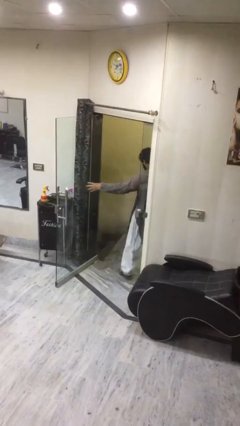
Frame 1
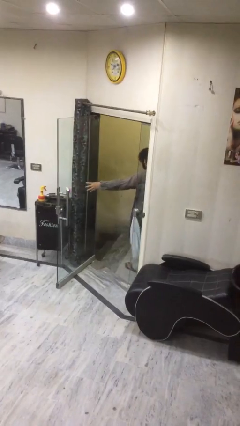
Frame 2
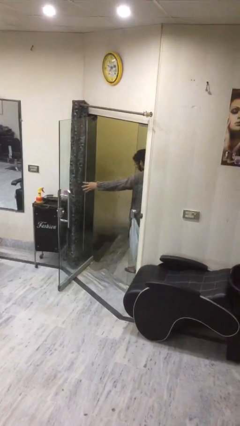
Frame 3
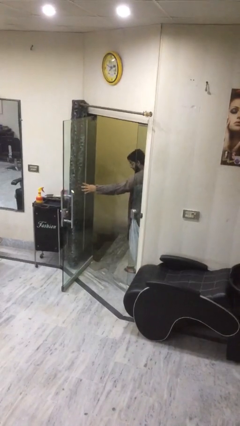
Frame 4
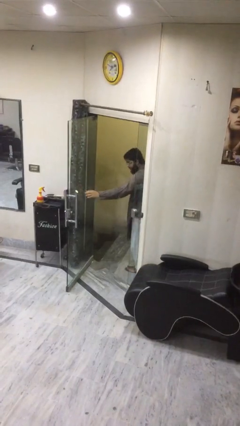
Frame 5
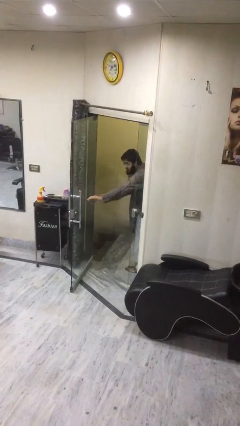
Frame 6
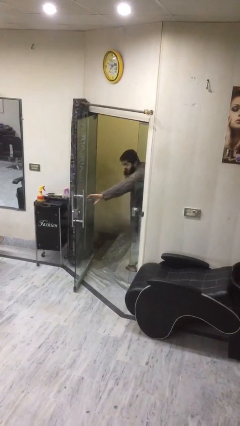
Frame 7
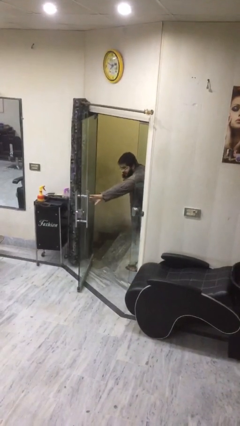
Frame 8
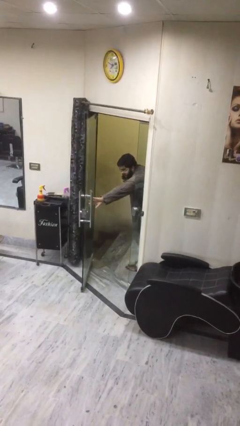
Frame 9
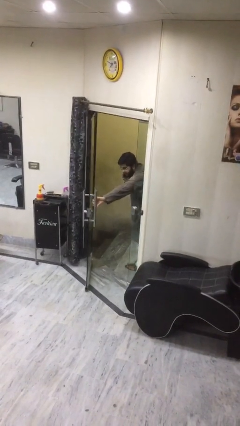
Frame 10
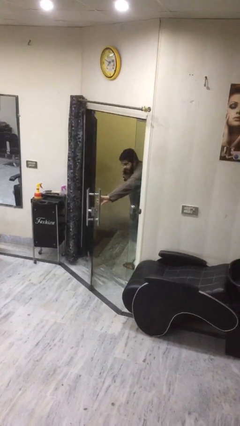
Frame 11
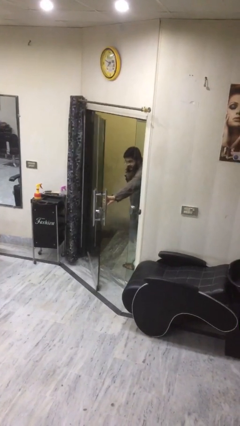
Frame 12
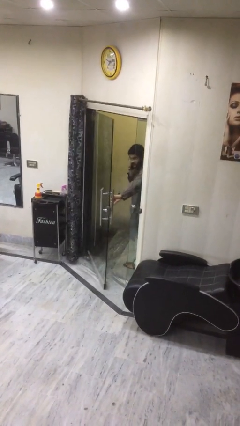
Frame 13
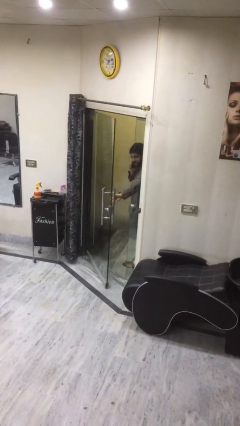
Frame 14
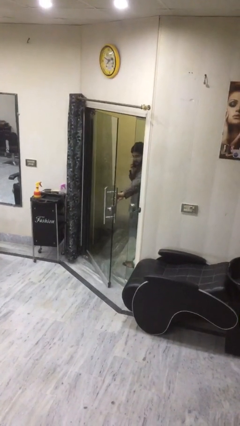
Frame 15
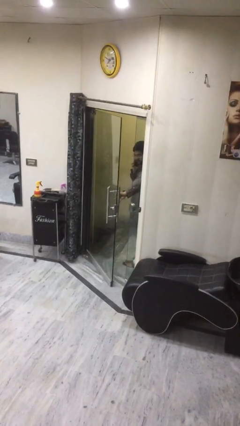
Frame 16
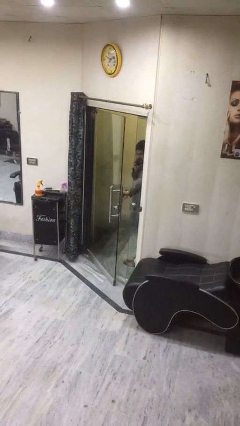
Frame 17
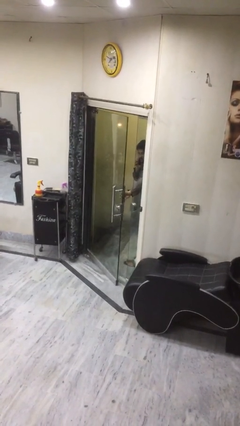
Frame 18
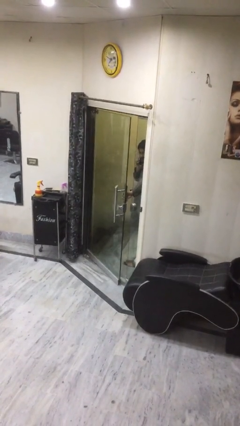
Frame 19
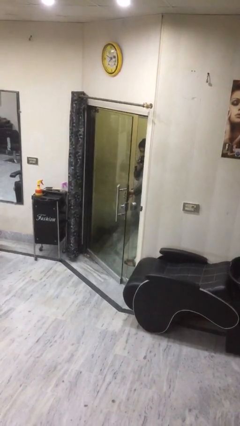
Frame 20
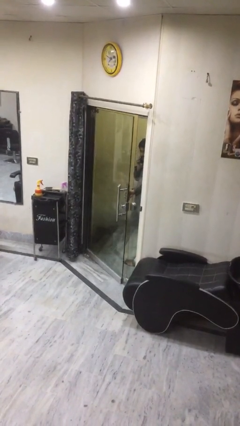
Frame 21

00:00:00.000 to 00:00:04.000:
person closes facility door

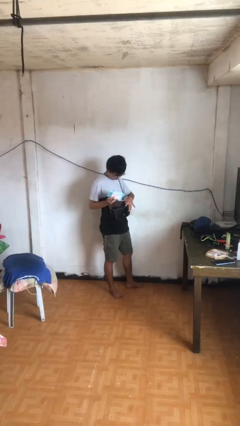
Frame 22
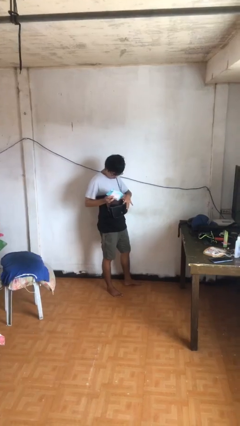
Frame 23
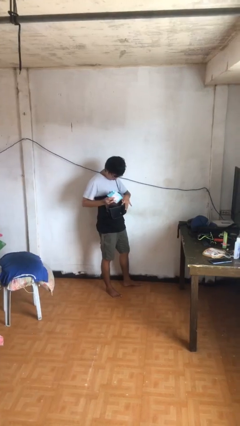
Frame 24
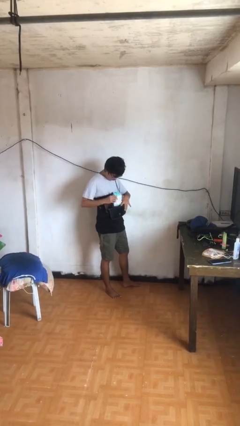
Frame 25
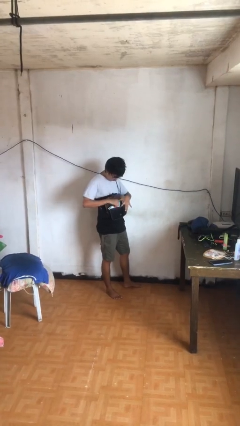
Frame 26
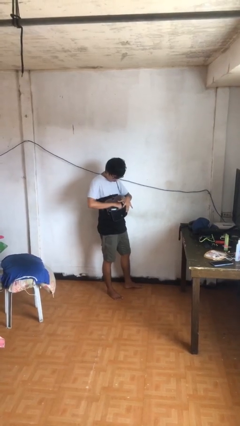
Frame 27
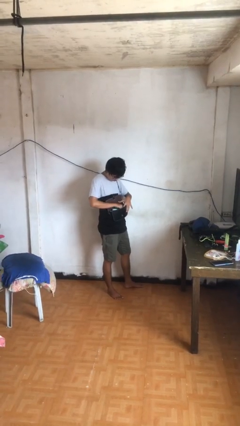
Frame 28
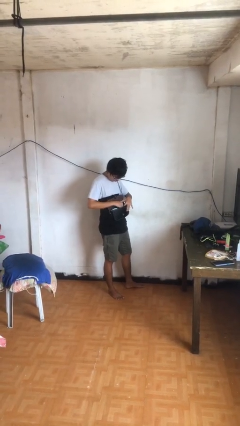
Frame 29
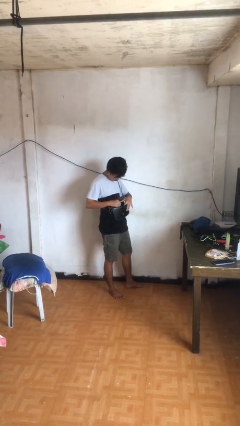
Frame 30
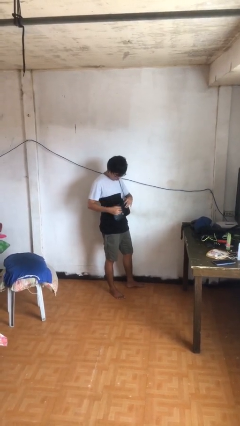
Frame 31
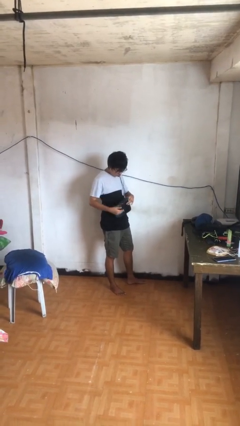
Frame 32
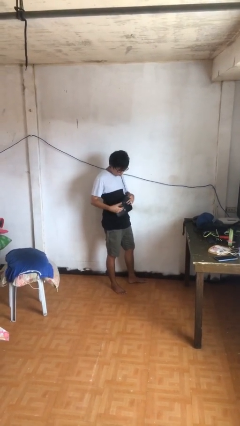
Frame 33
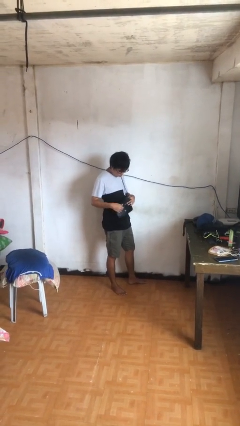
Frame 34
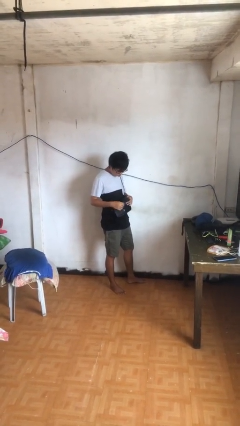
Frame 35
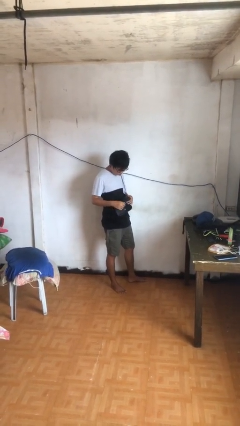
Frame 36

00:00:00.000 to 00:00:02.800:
person puts object into purse

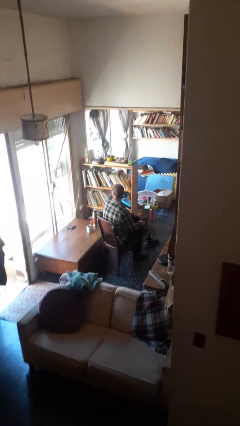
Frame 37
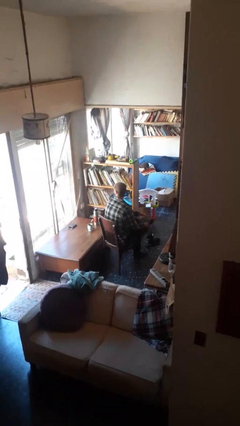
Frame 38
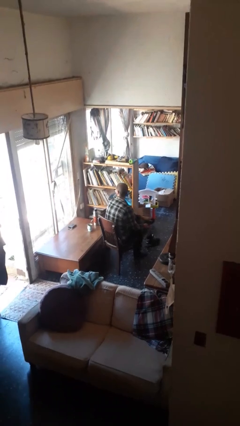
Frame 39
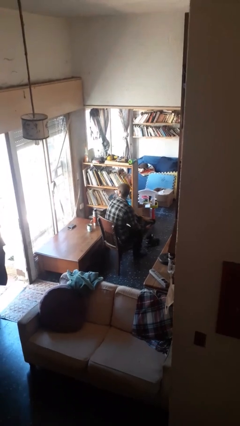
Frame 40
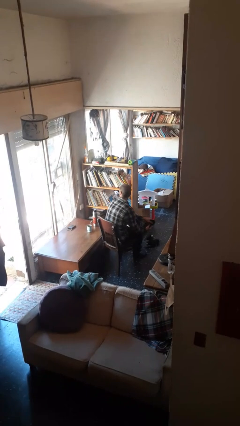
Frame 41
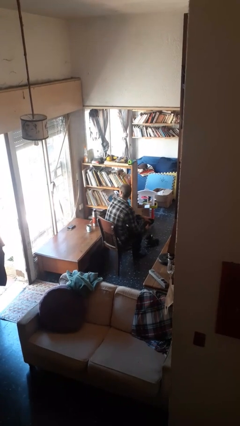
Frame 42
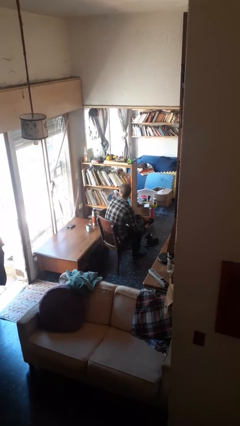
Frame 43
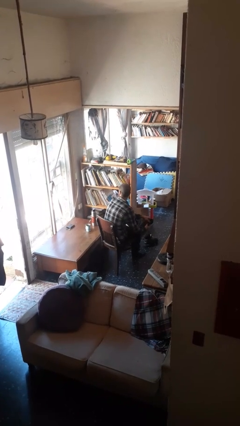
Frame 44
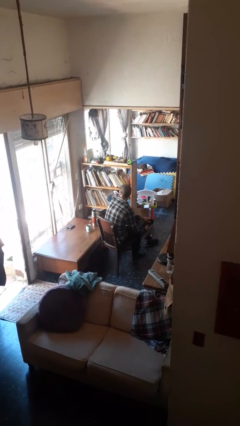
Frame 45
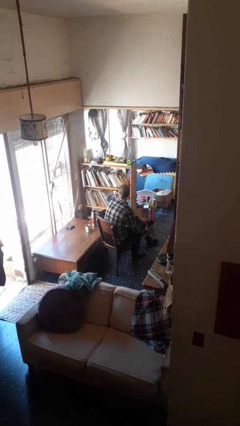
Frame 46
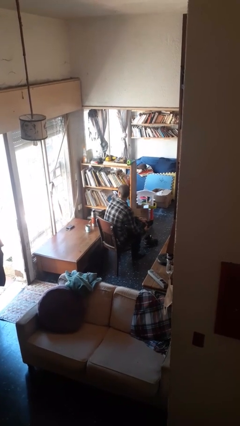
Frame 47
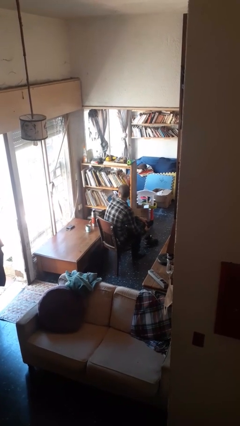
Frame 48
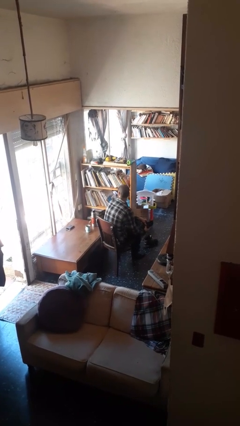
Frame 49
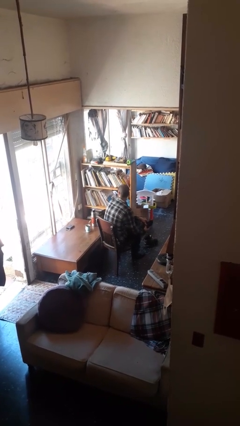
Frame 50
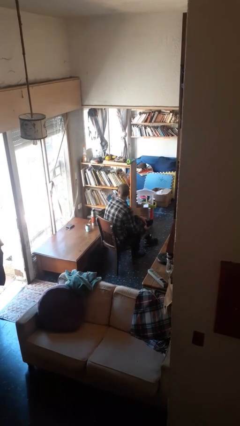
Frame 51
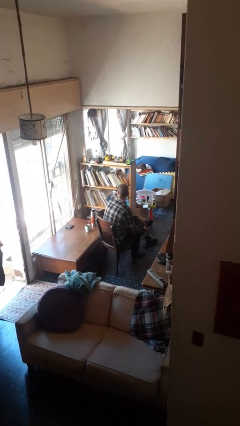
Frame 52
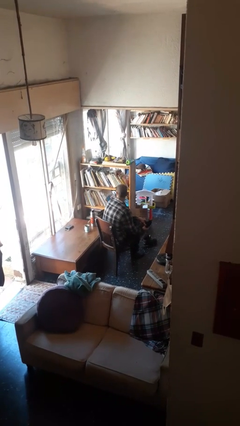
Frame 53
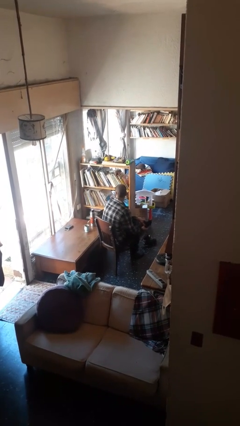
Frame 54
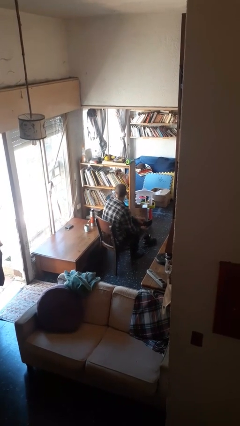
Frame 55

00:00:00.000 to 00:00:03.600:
person rubs foot

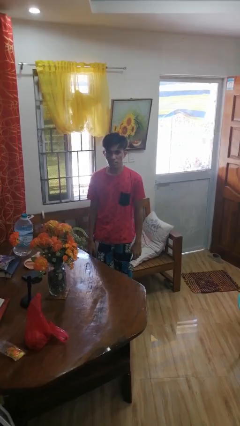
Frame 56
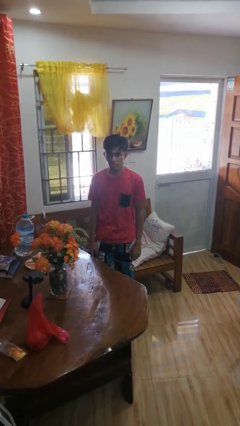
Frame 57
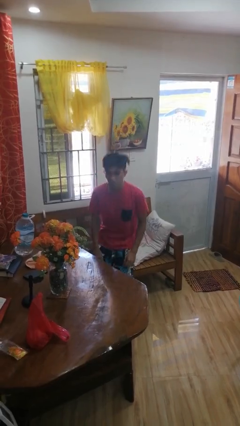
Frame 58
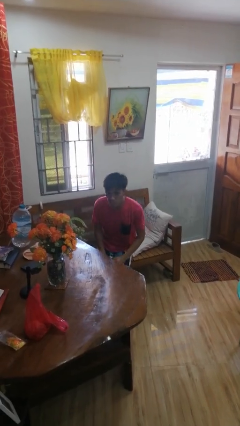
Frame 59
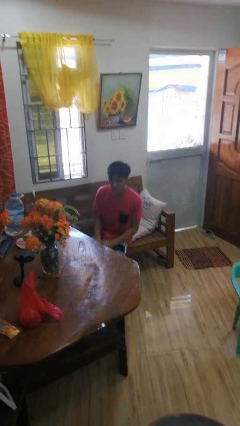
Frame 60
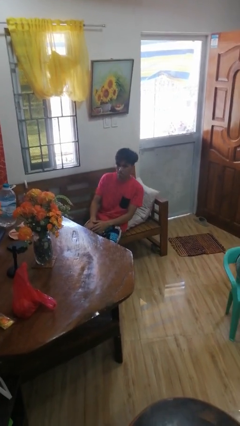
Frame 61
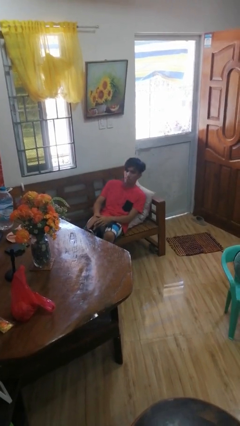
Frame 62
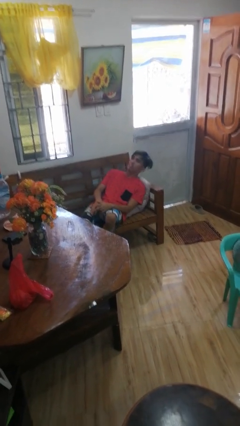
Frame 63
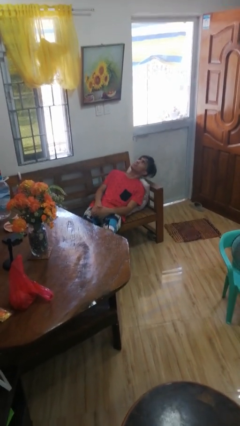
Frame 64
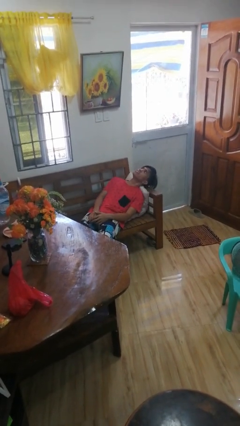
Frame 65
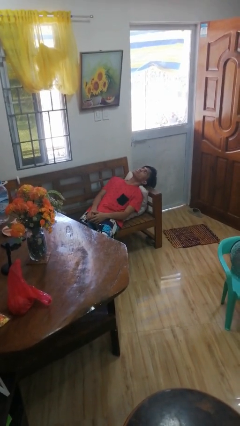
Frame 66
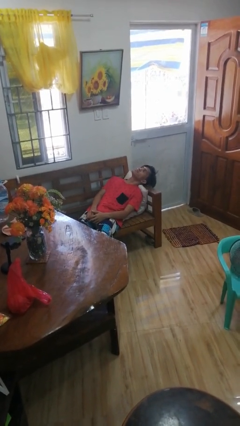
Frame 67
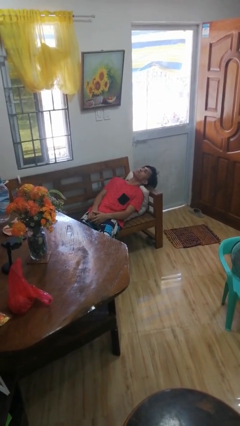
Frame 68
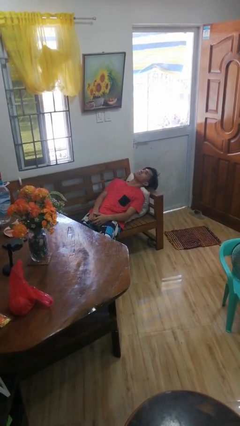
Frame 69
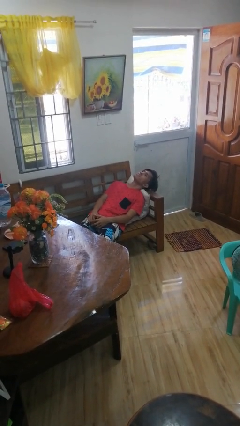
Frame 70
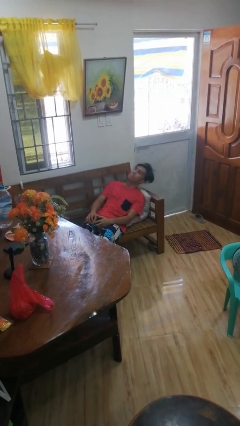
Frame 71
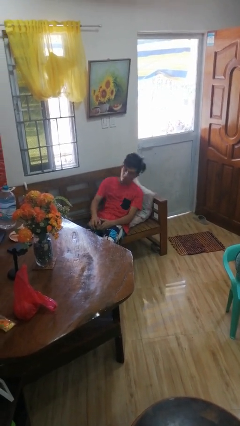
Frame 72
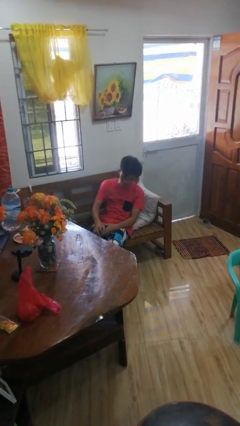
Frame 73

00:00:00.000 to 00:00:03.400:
person lies down on couch

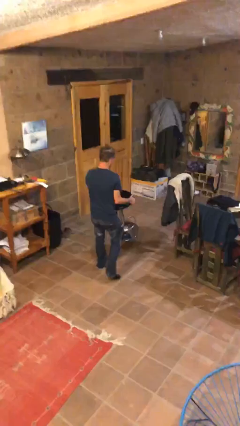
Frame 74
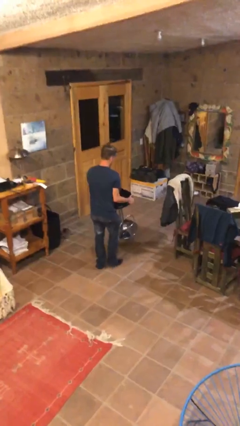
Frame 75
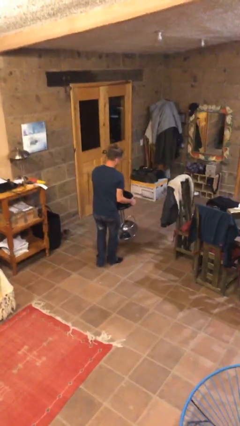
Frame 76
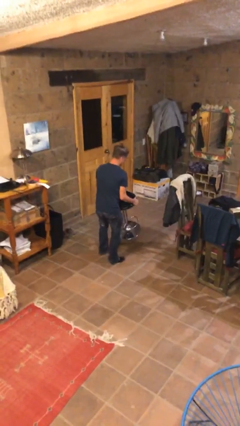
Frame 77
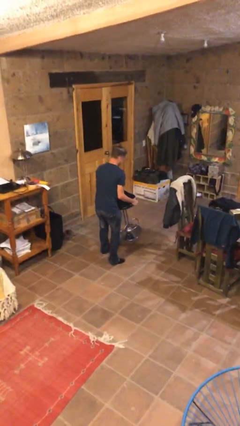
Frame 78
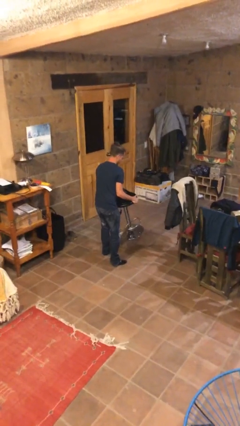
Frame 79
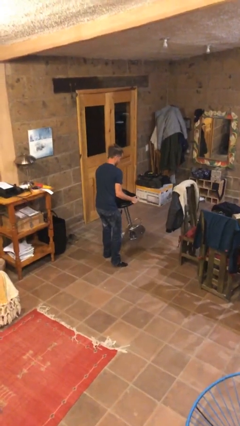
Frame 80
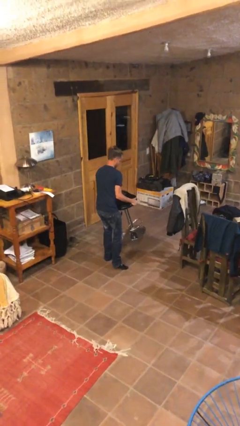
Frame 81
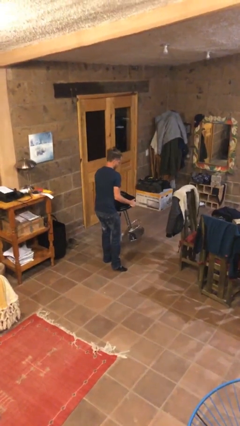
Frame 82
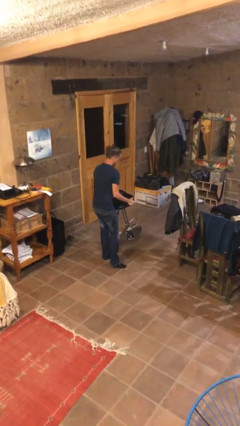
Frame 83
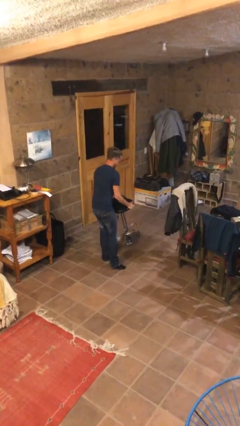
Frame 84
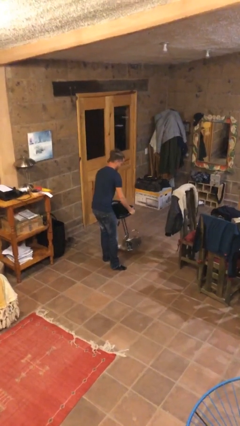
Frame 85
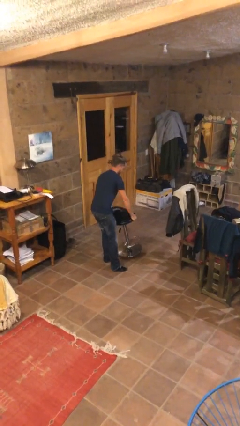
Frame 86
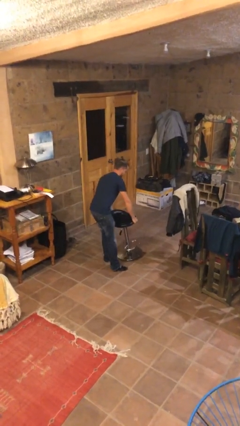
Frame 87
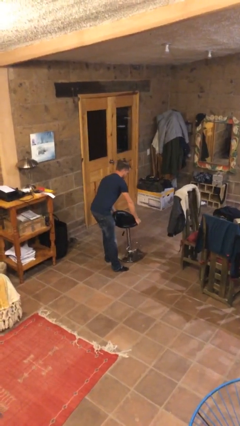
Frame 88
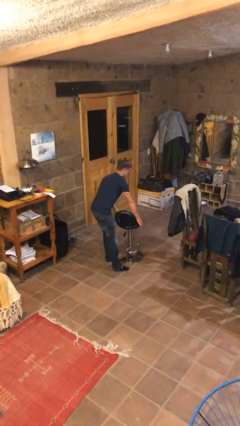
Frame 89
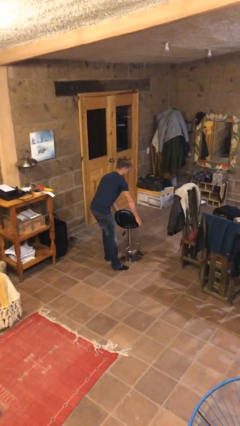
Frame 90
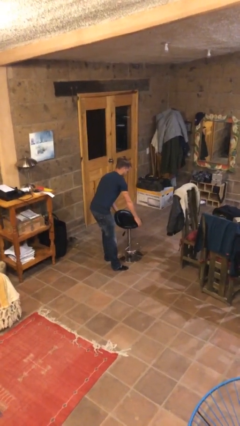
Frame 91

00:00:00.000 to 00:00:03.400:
person puts down object on floor

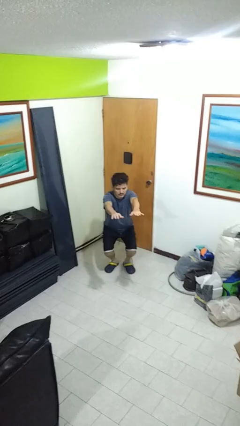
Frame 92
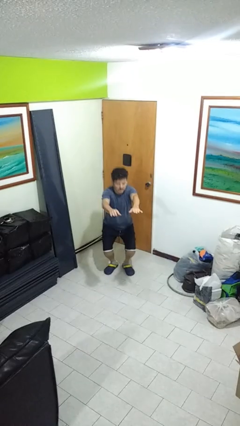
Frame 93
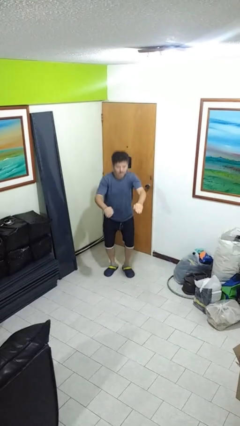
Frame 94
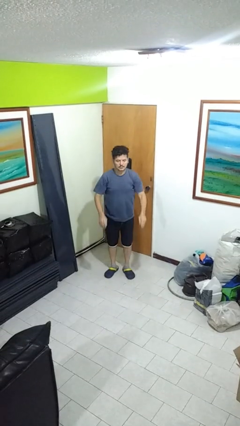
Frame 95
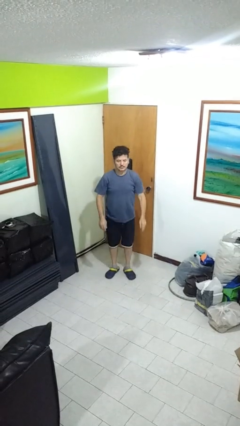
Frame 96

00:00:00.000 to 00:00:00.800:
person stands up
